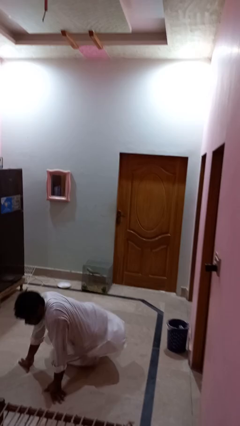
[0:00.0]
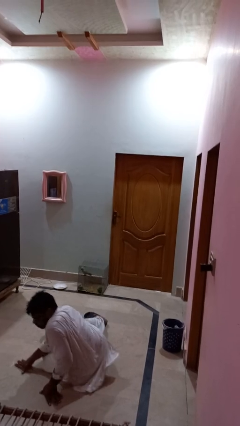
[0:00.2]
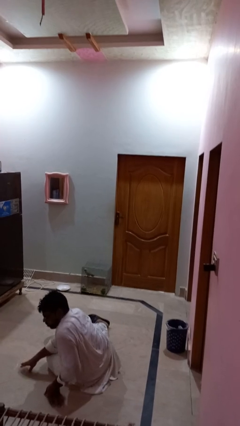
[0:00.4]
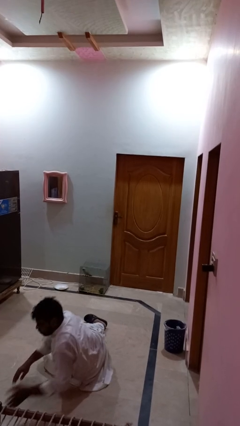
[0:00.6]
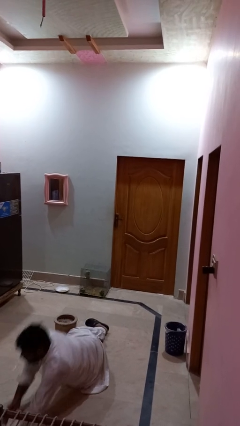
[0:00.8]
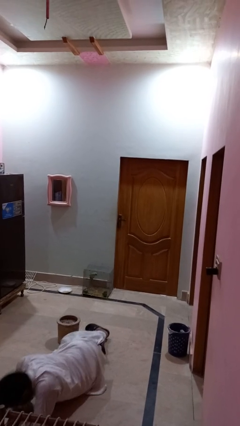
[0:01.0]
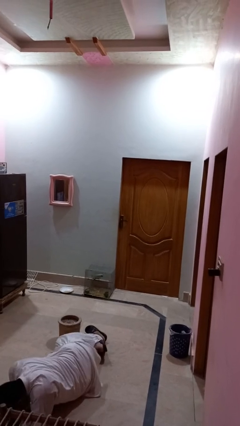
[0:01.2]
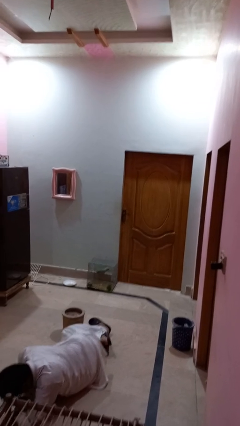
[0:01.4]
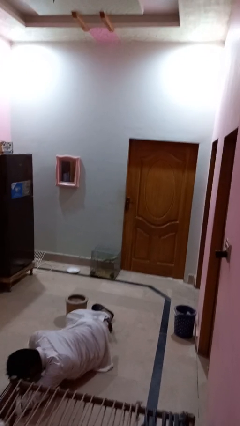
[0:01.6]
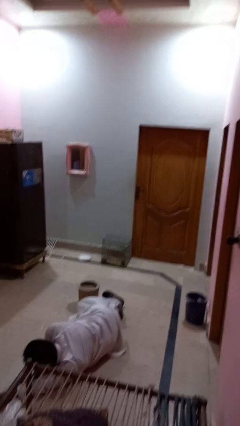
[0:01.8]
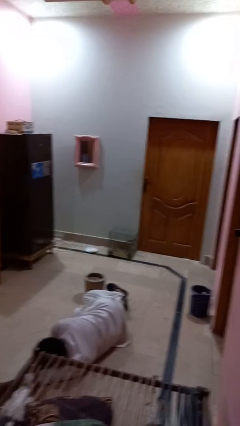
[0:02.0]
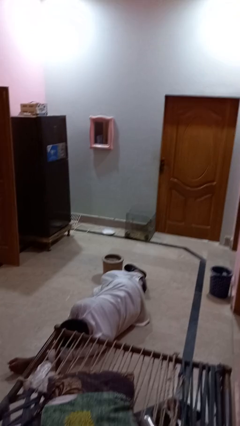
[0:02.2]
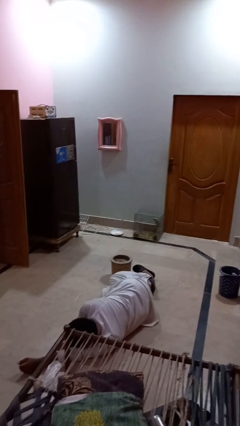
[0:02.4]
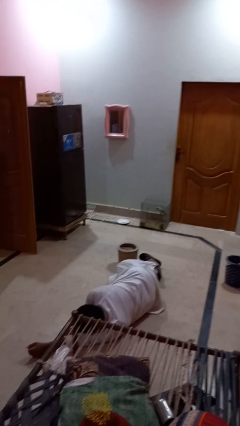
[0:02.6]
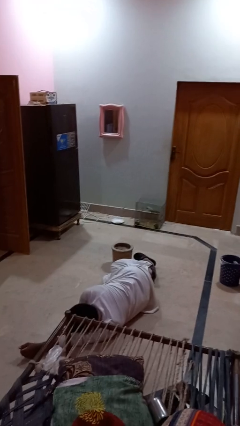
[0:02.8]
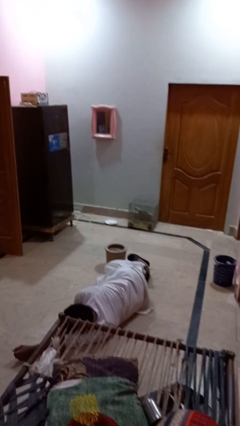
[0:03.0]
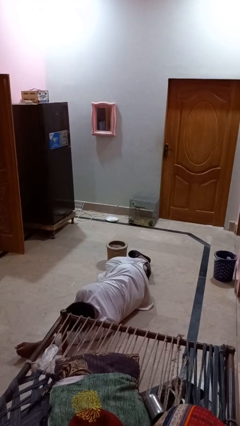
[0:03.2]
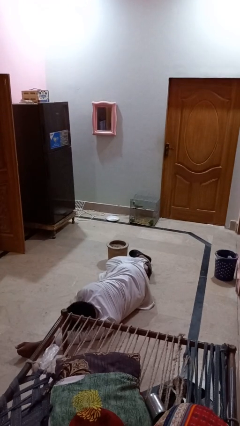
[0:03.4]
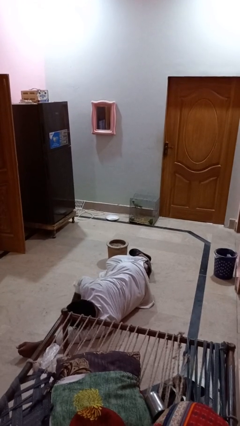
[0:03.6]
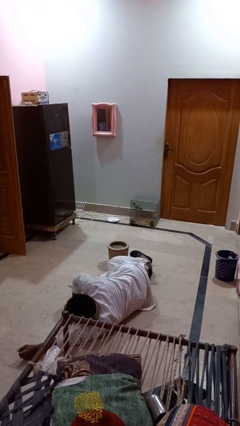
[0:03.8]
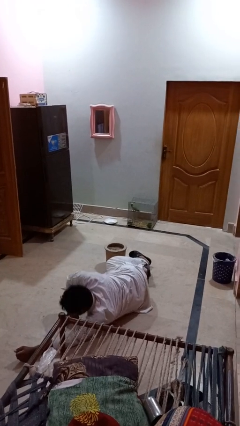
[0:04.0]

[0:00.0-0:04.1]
person lies down on floor

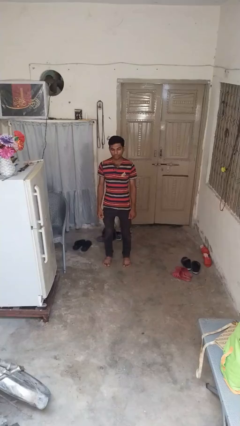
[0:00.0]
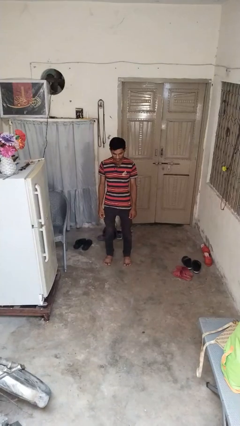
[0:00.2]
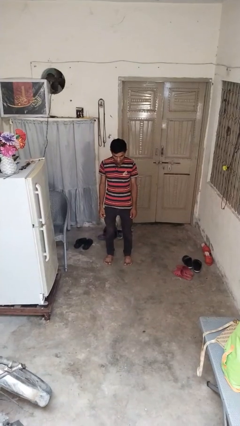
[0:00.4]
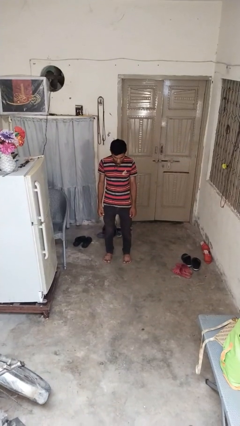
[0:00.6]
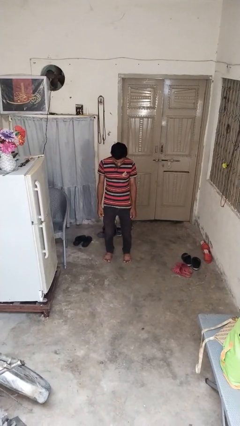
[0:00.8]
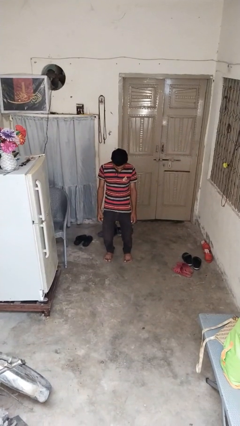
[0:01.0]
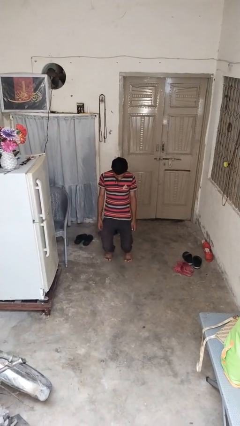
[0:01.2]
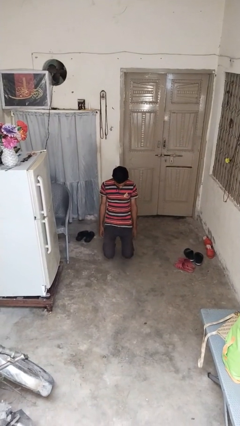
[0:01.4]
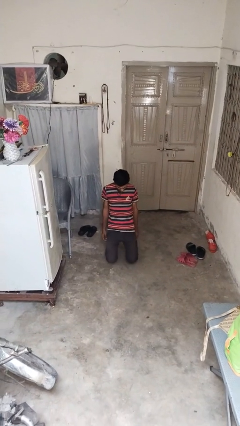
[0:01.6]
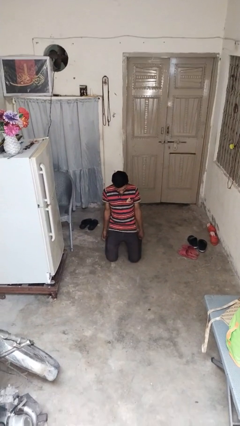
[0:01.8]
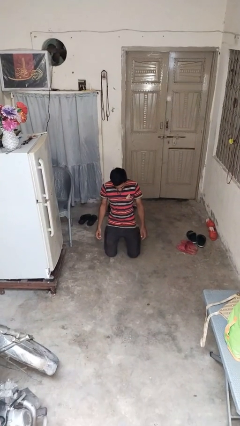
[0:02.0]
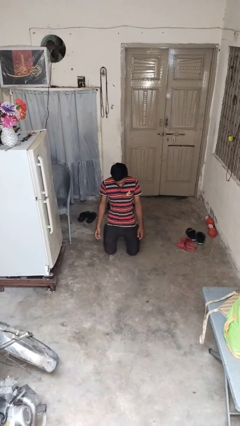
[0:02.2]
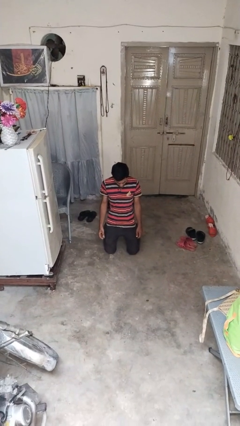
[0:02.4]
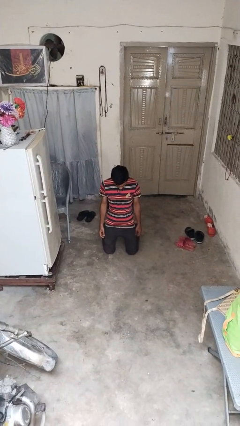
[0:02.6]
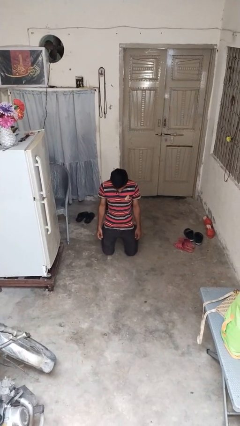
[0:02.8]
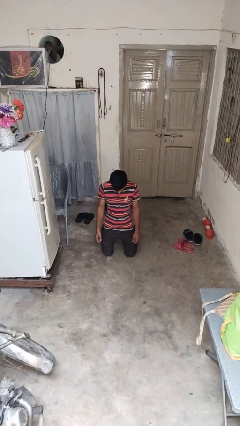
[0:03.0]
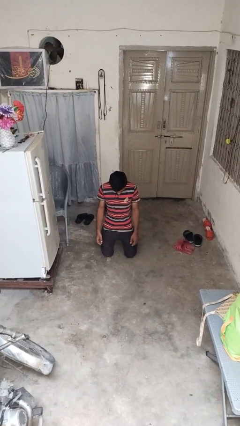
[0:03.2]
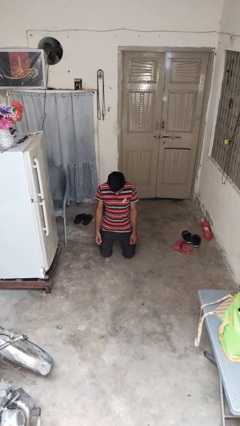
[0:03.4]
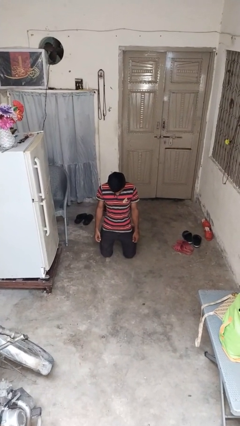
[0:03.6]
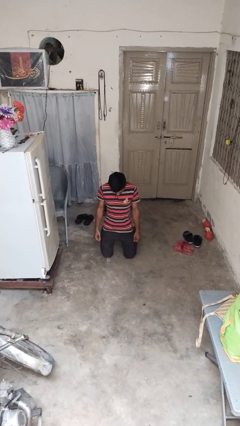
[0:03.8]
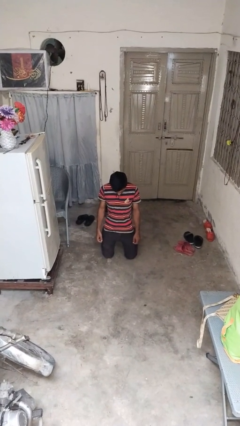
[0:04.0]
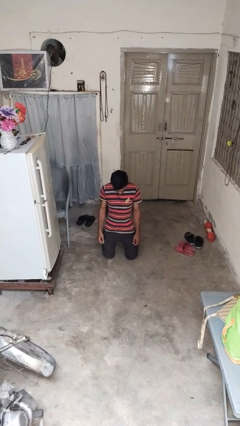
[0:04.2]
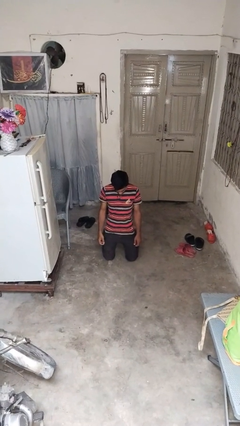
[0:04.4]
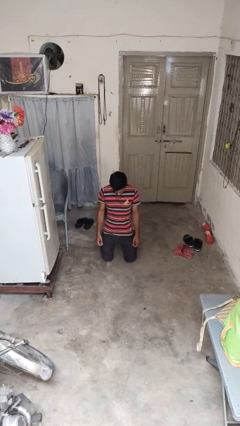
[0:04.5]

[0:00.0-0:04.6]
person kneels

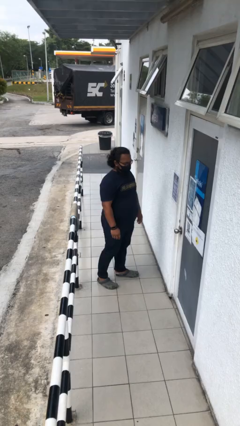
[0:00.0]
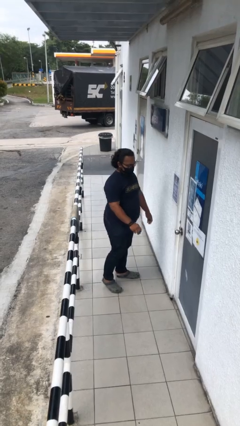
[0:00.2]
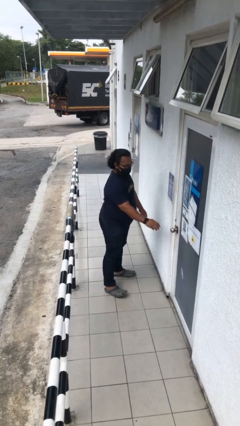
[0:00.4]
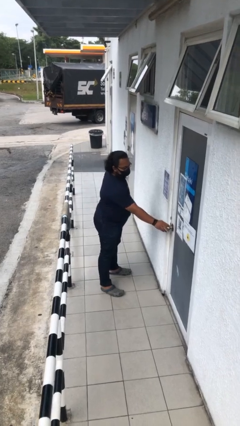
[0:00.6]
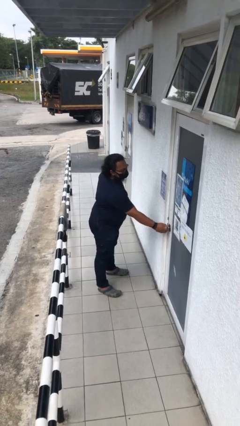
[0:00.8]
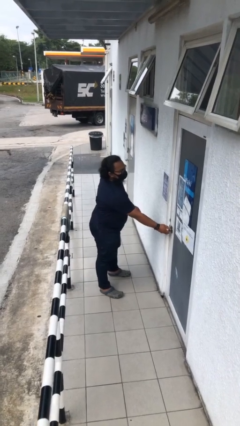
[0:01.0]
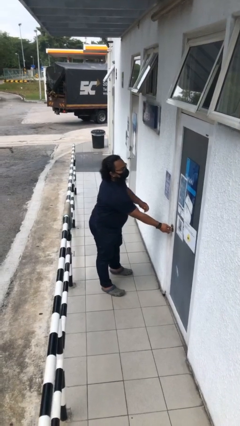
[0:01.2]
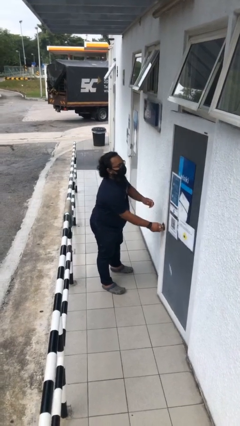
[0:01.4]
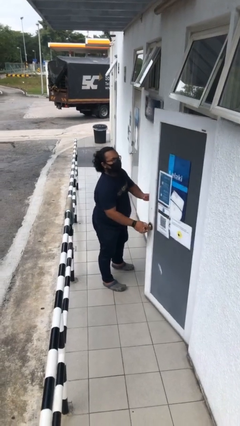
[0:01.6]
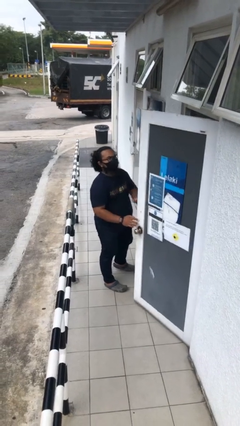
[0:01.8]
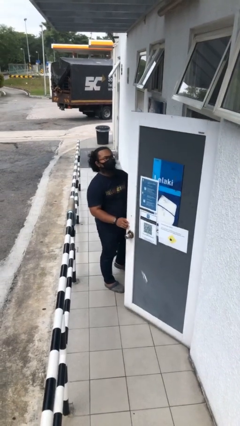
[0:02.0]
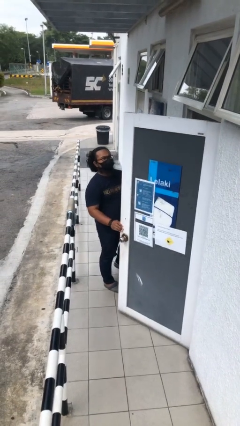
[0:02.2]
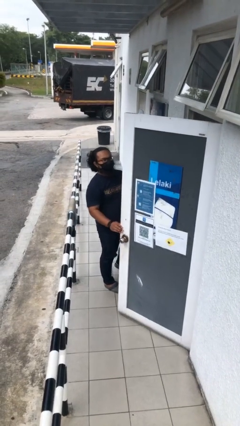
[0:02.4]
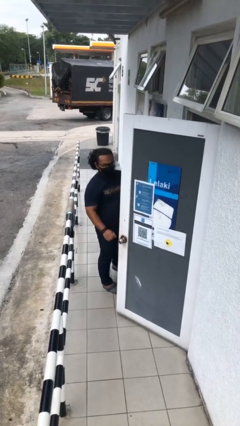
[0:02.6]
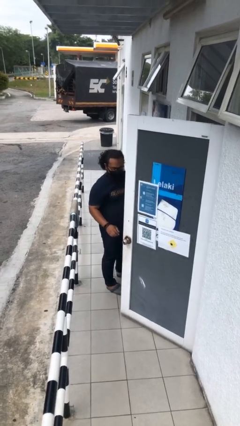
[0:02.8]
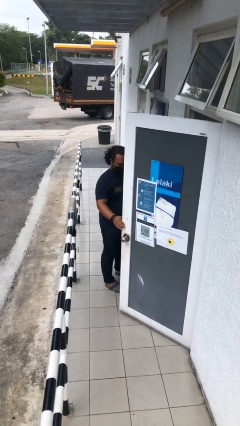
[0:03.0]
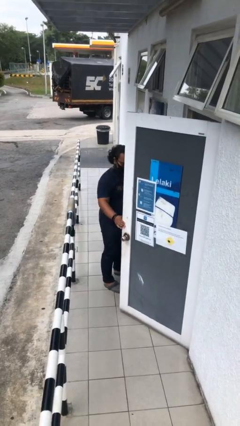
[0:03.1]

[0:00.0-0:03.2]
person opens facility door

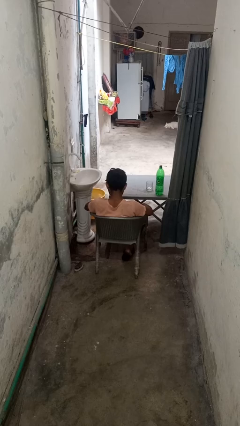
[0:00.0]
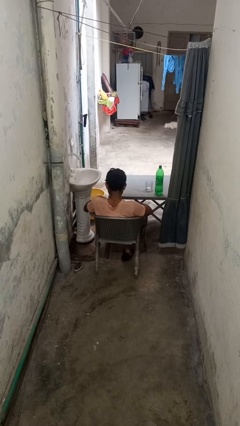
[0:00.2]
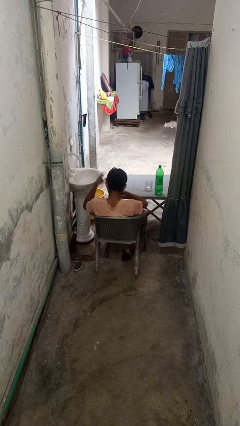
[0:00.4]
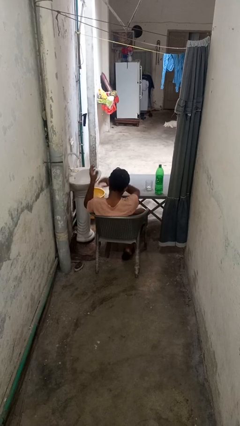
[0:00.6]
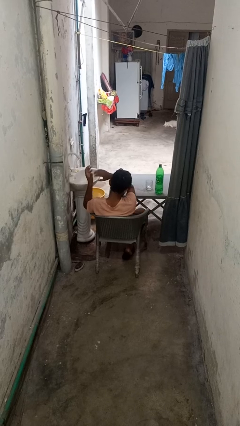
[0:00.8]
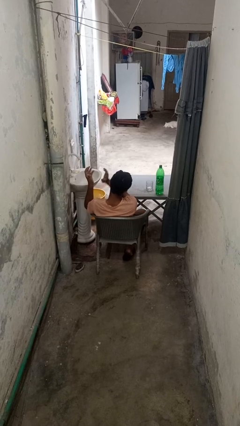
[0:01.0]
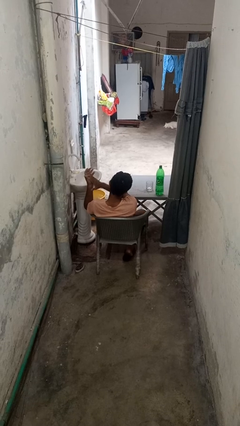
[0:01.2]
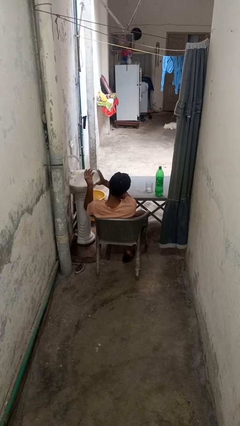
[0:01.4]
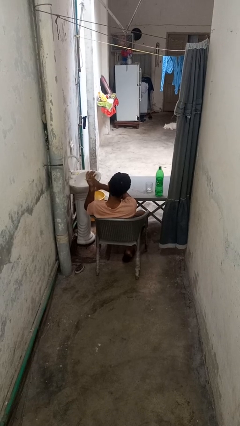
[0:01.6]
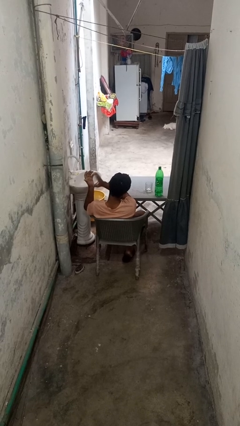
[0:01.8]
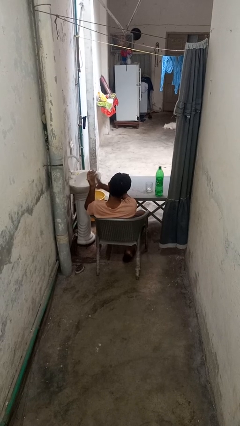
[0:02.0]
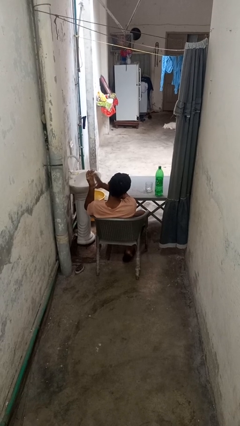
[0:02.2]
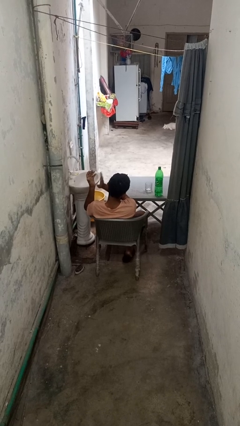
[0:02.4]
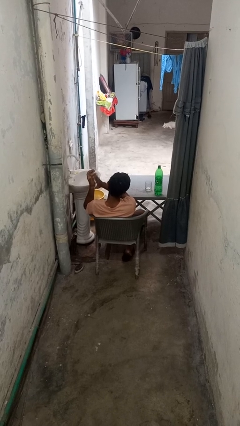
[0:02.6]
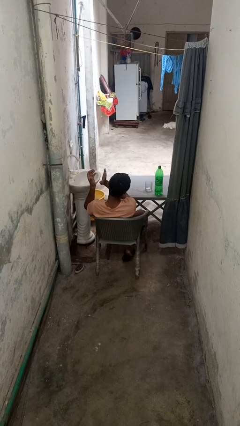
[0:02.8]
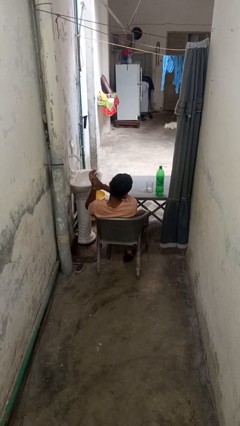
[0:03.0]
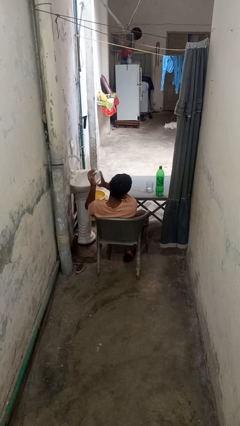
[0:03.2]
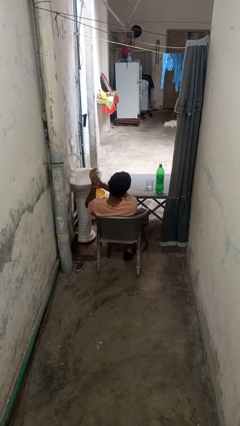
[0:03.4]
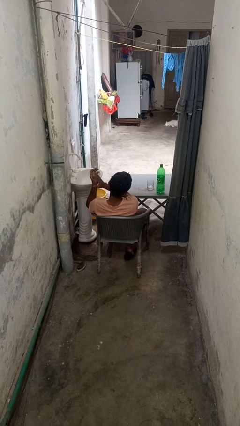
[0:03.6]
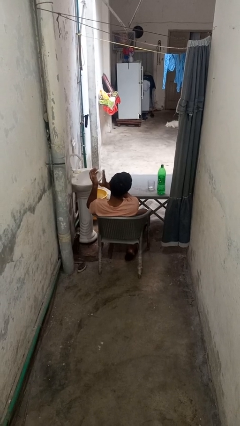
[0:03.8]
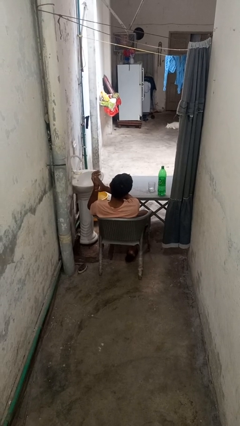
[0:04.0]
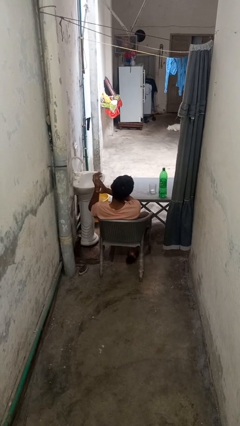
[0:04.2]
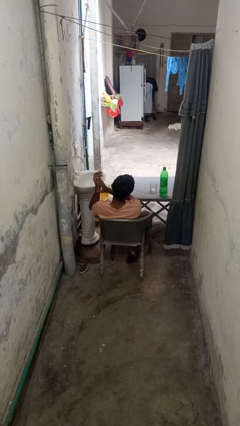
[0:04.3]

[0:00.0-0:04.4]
person claps hands

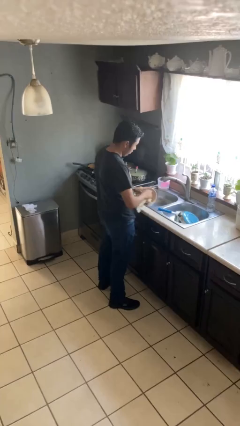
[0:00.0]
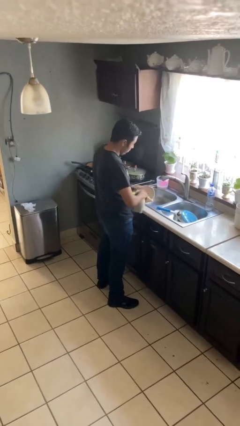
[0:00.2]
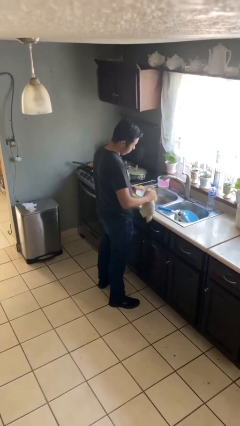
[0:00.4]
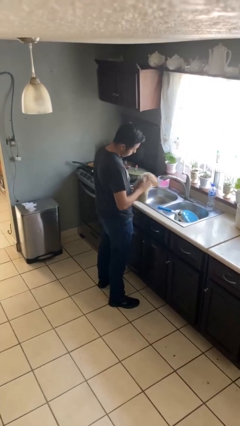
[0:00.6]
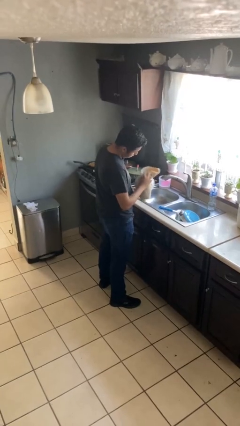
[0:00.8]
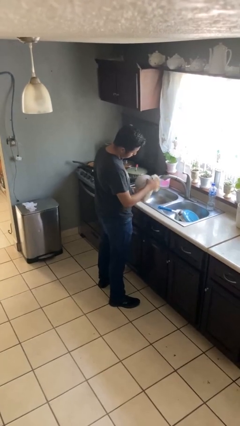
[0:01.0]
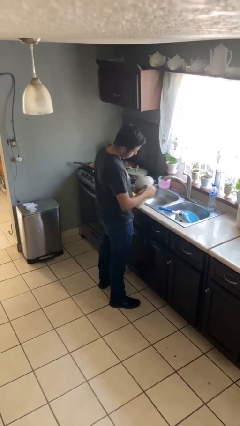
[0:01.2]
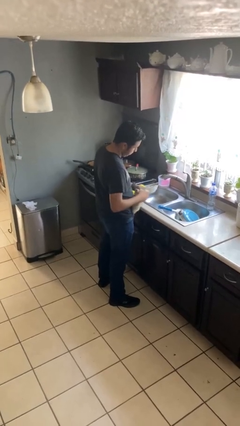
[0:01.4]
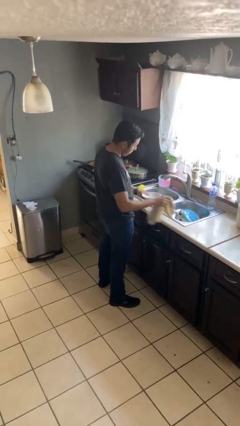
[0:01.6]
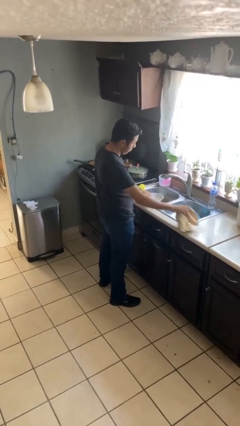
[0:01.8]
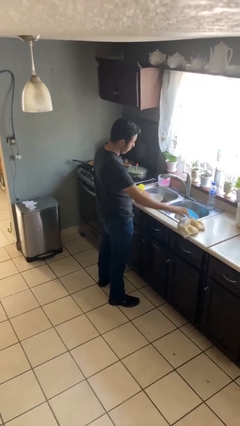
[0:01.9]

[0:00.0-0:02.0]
person dries dish
